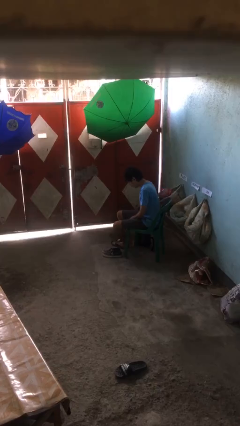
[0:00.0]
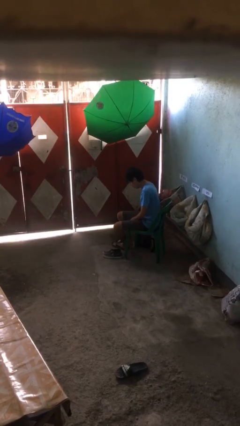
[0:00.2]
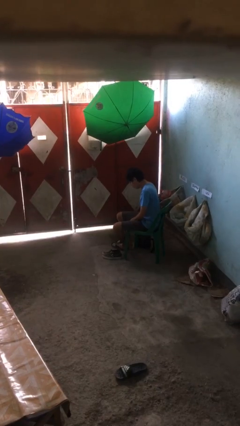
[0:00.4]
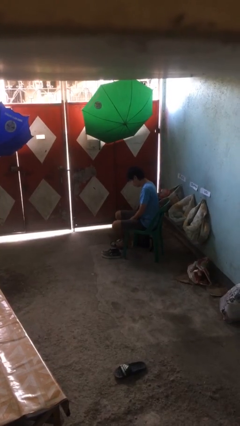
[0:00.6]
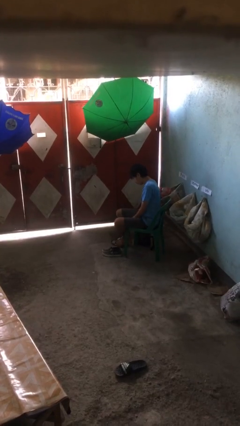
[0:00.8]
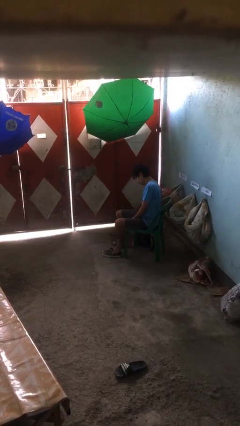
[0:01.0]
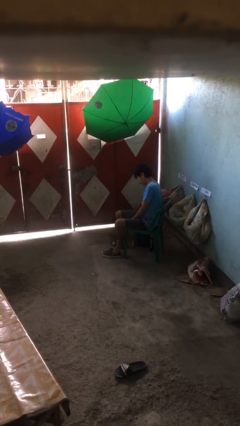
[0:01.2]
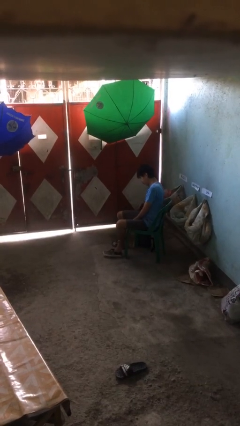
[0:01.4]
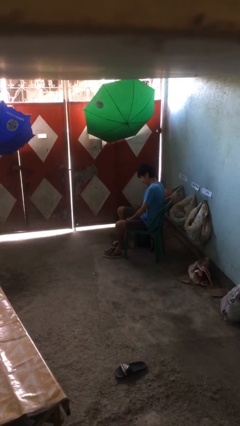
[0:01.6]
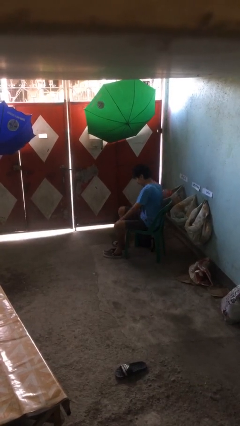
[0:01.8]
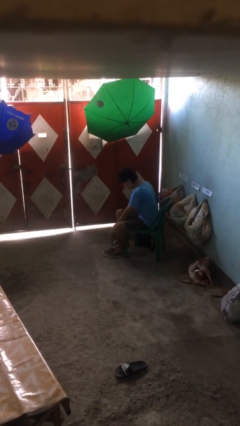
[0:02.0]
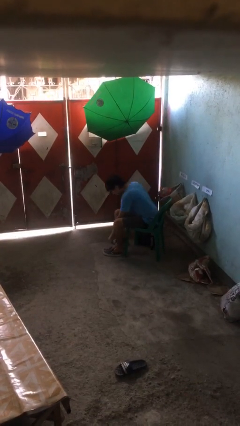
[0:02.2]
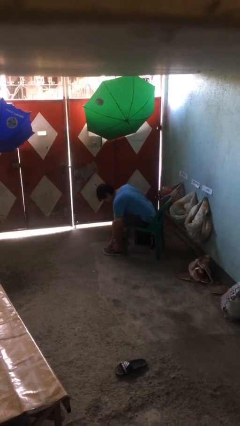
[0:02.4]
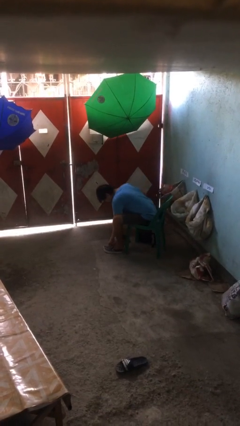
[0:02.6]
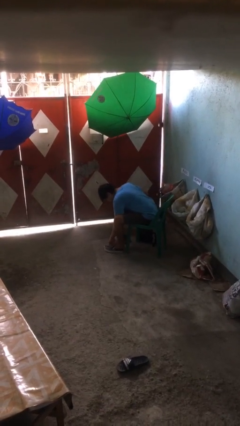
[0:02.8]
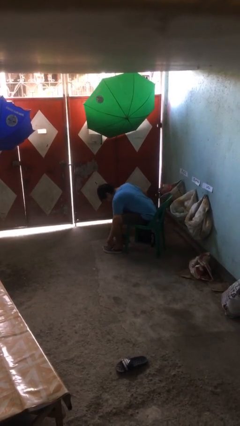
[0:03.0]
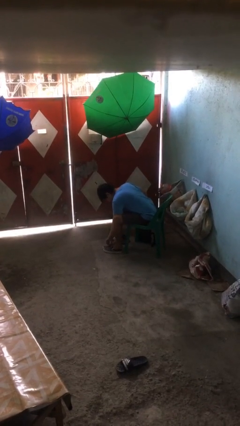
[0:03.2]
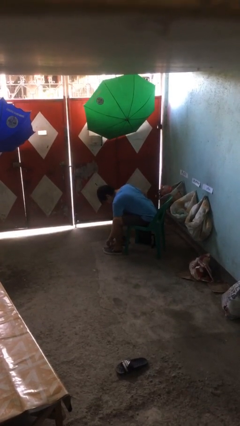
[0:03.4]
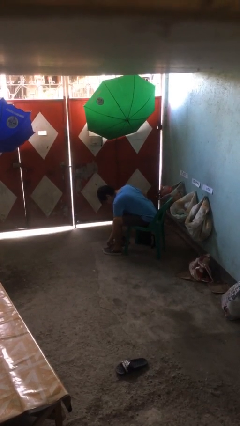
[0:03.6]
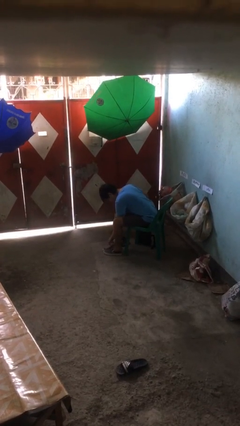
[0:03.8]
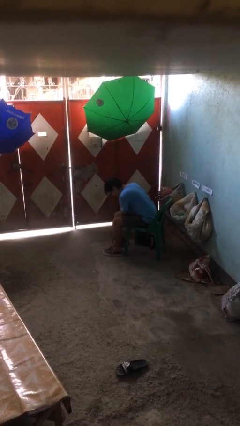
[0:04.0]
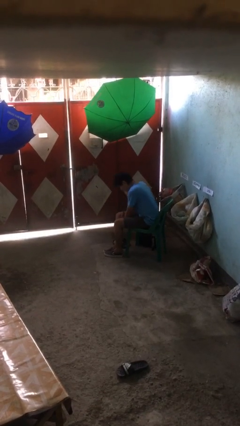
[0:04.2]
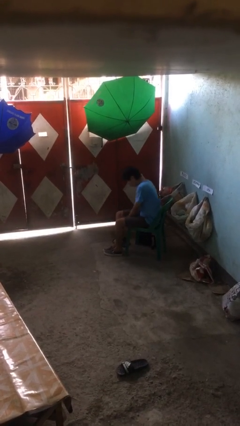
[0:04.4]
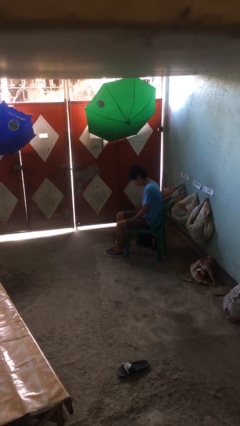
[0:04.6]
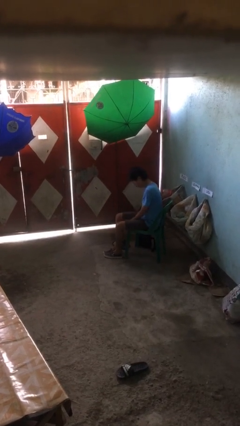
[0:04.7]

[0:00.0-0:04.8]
person puts on shoes

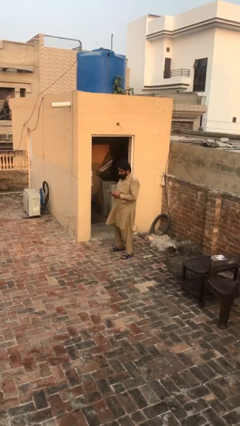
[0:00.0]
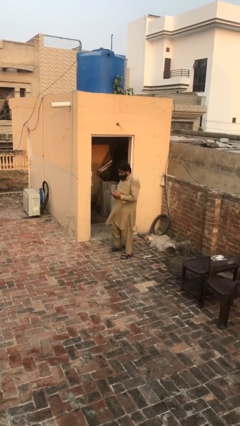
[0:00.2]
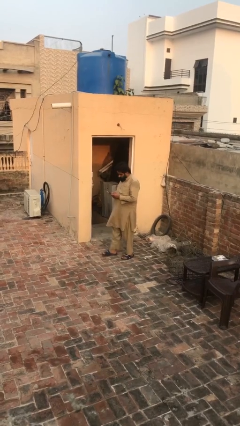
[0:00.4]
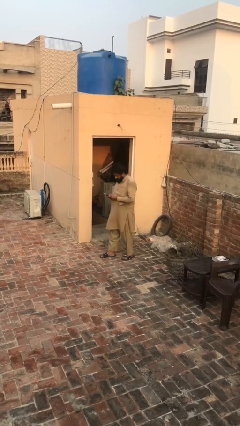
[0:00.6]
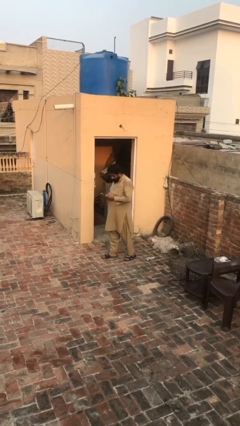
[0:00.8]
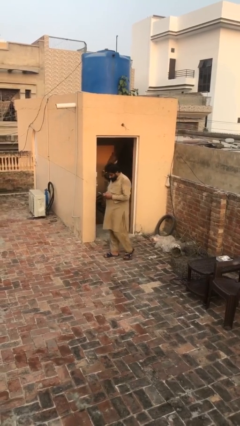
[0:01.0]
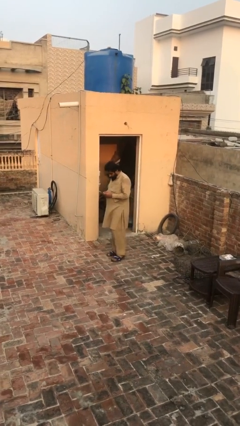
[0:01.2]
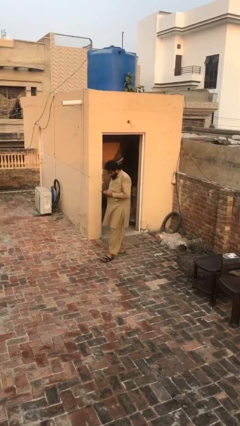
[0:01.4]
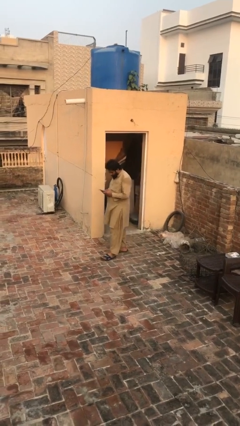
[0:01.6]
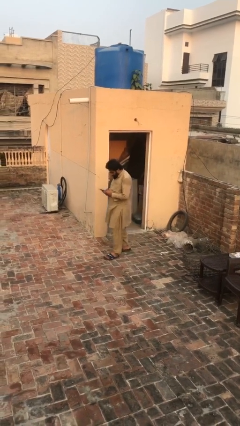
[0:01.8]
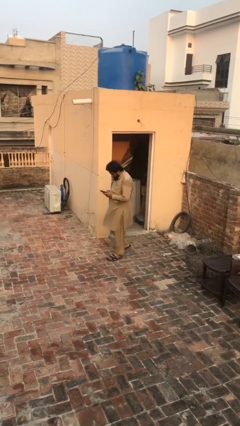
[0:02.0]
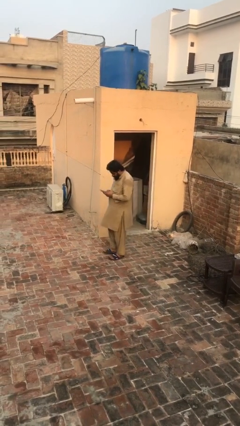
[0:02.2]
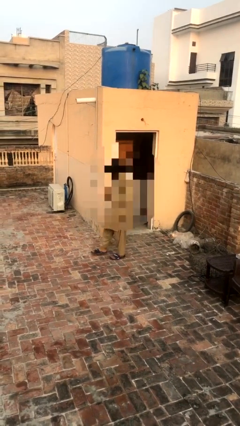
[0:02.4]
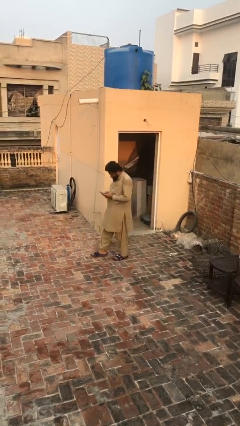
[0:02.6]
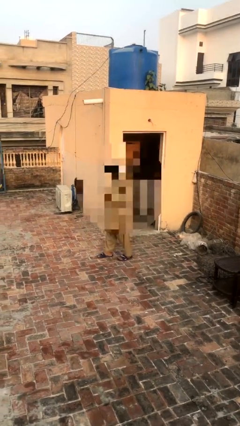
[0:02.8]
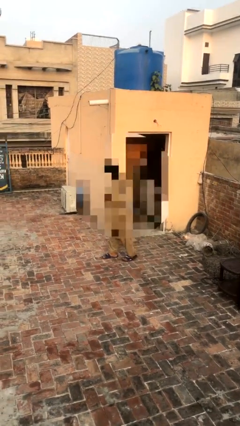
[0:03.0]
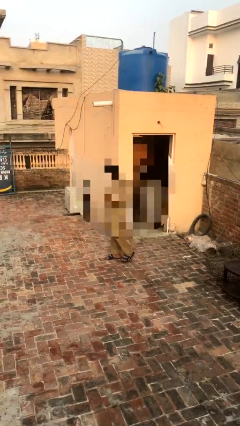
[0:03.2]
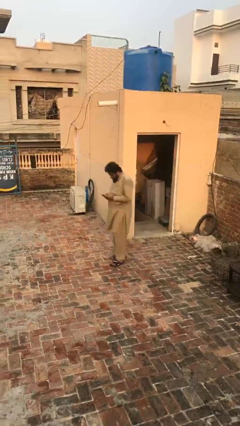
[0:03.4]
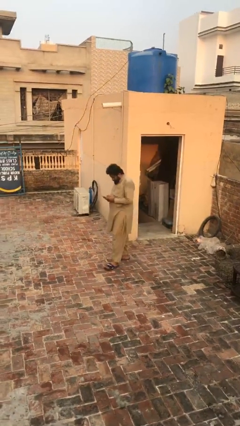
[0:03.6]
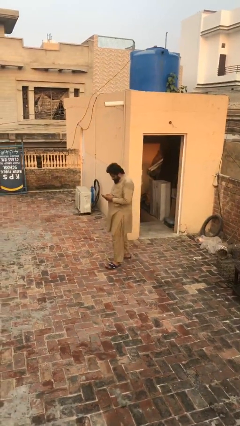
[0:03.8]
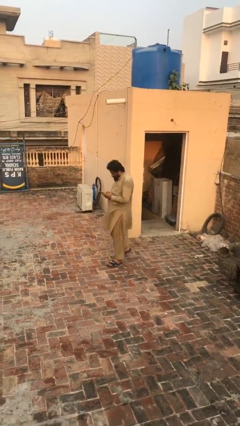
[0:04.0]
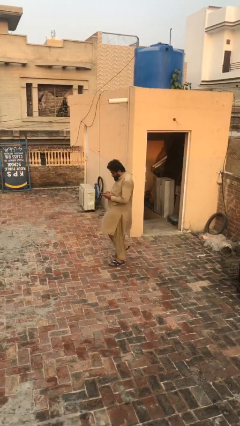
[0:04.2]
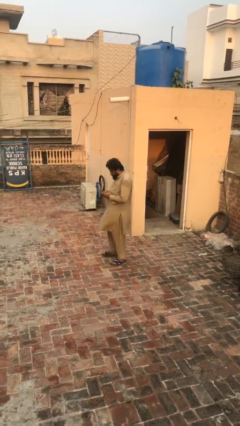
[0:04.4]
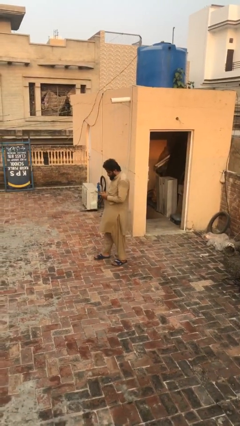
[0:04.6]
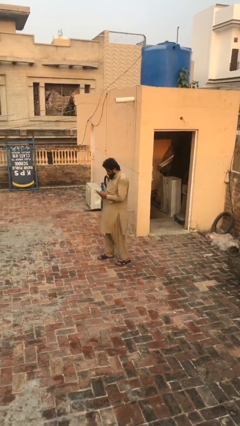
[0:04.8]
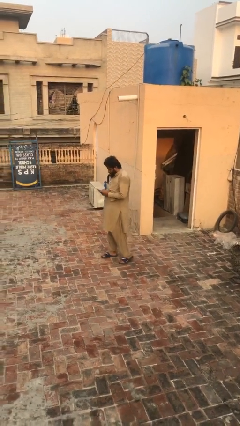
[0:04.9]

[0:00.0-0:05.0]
person texts on phone

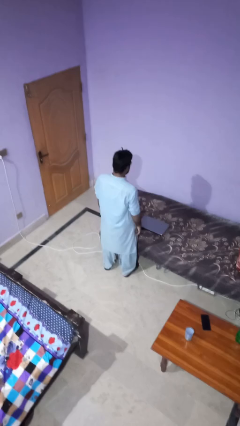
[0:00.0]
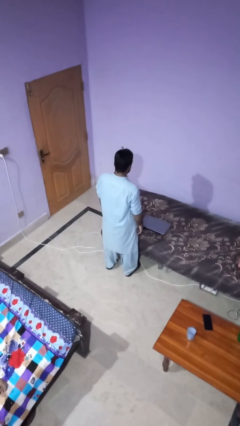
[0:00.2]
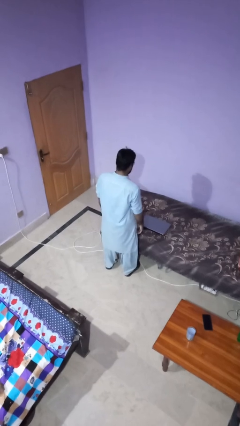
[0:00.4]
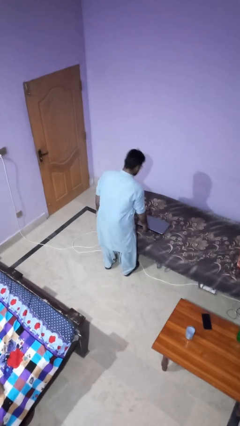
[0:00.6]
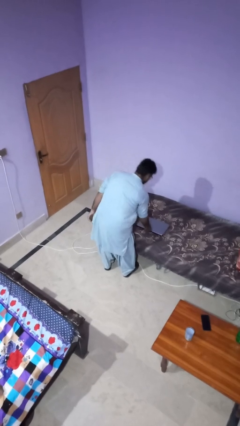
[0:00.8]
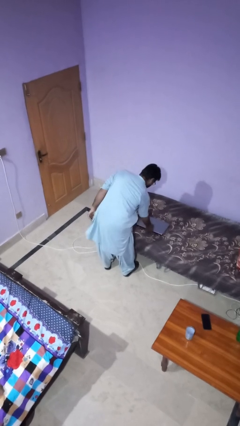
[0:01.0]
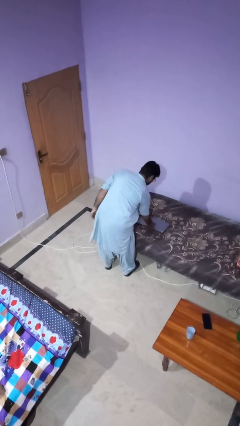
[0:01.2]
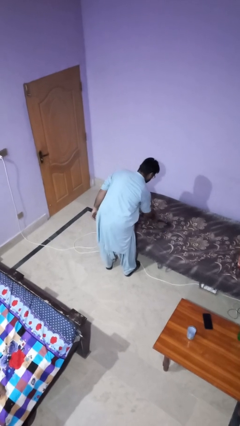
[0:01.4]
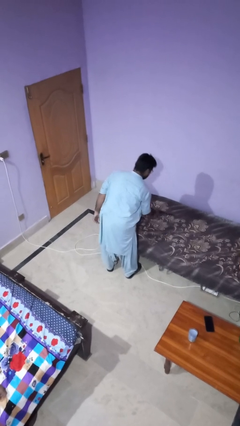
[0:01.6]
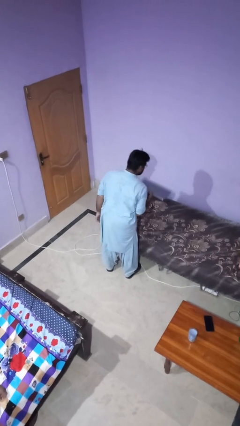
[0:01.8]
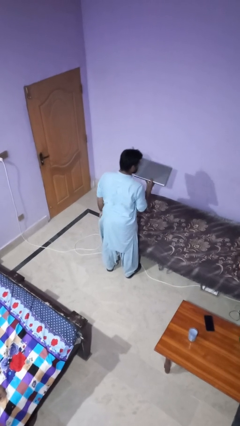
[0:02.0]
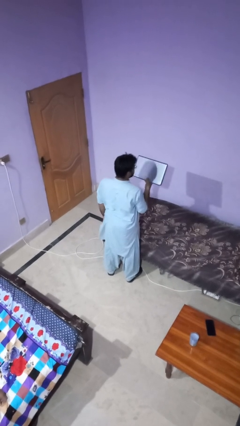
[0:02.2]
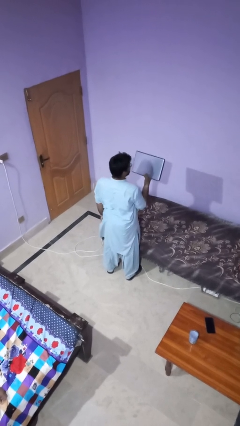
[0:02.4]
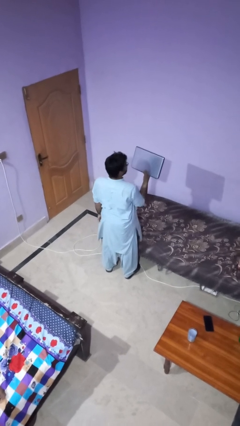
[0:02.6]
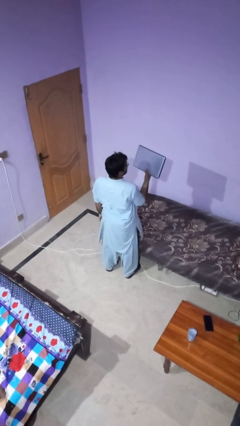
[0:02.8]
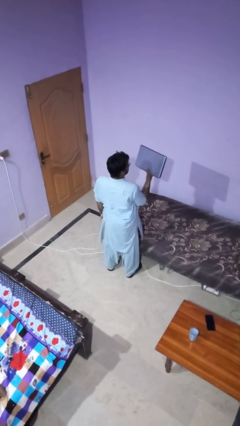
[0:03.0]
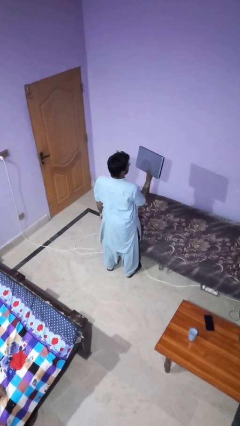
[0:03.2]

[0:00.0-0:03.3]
person picks up object from bed

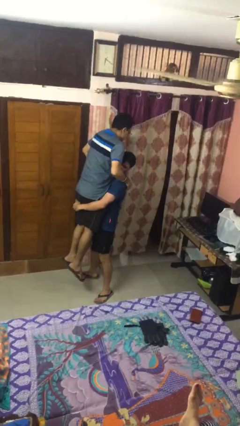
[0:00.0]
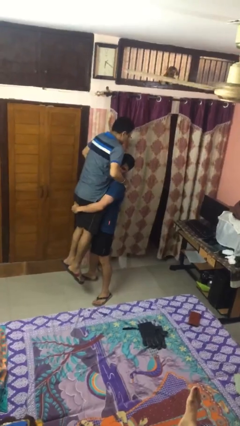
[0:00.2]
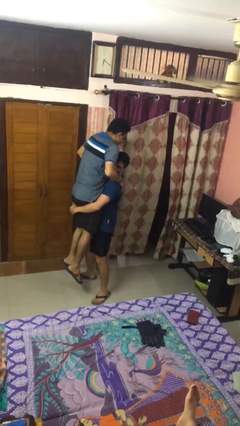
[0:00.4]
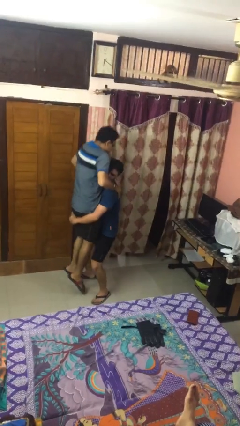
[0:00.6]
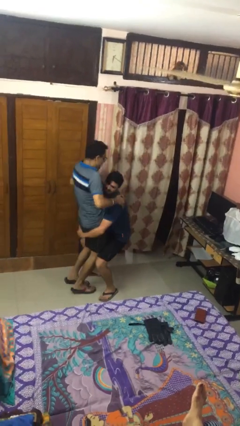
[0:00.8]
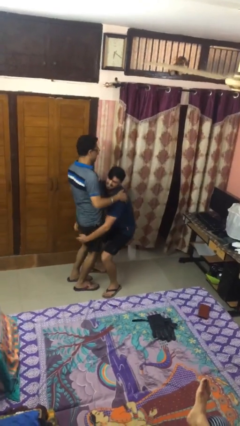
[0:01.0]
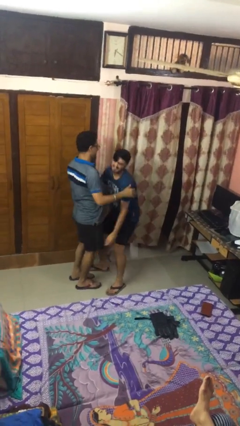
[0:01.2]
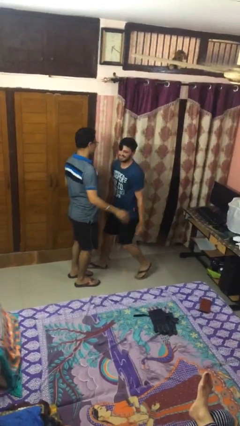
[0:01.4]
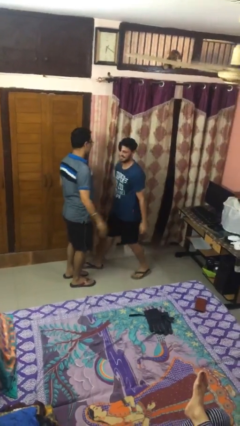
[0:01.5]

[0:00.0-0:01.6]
person puts down person

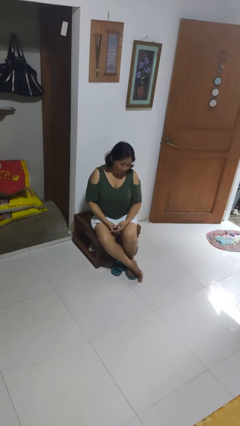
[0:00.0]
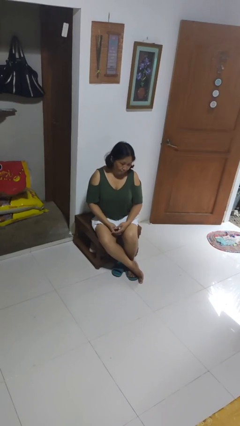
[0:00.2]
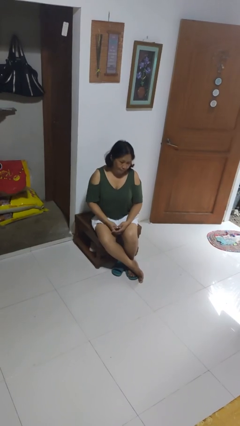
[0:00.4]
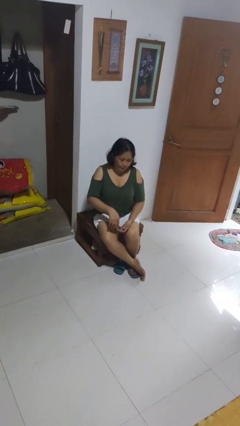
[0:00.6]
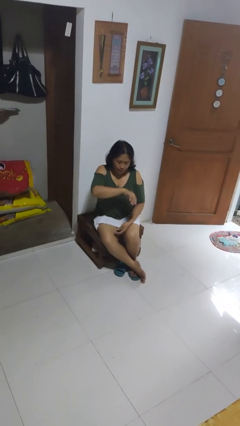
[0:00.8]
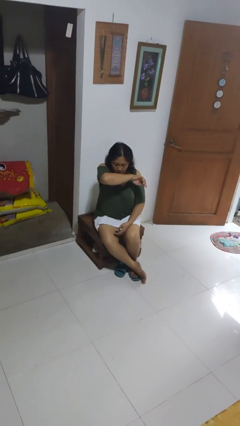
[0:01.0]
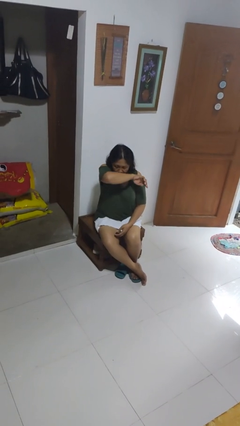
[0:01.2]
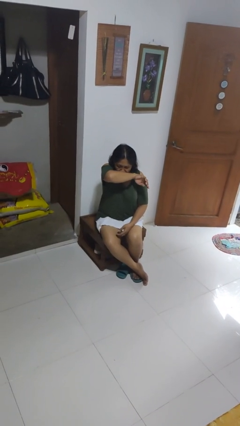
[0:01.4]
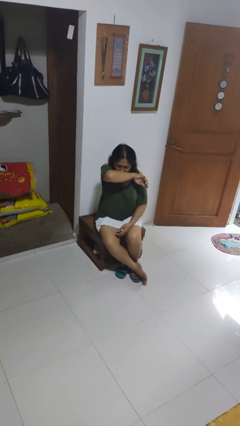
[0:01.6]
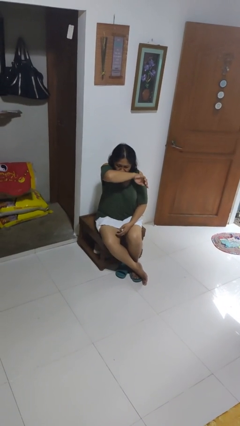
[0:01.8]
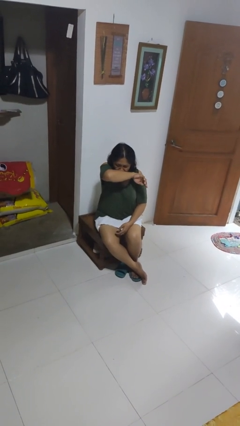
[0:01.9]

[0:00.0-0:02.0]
person sneezes into arm

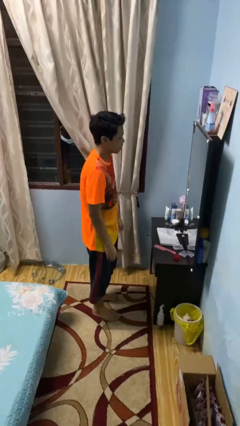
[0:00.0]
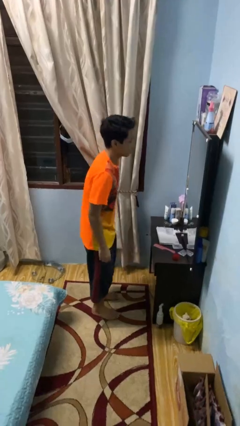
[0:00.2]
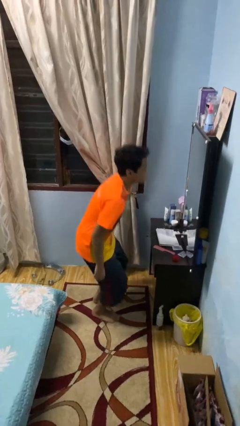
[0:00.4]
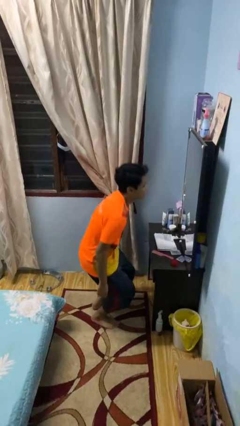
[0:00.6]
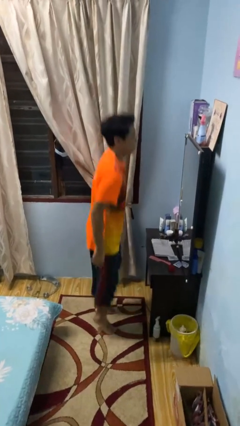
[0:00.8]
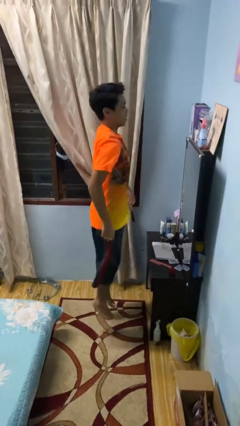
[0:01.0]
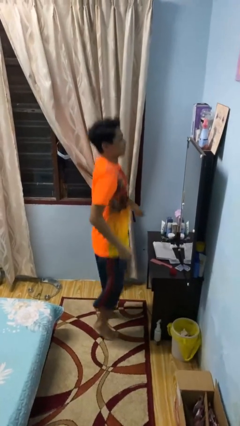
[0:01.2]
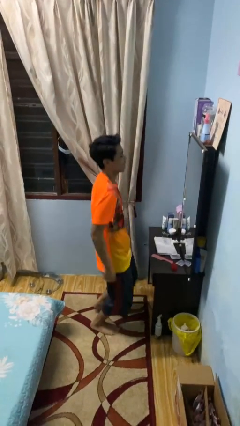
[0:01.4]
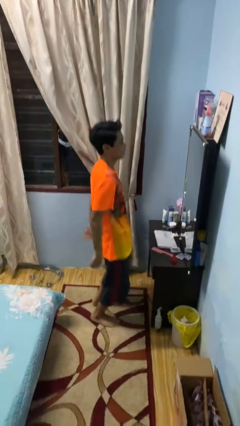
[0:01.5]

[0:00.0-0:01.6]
person jumps
